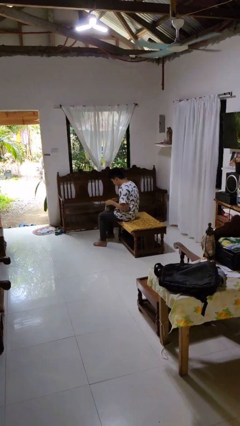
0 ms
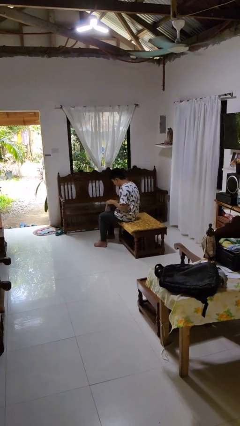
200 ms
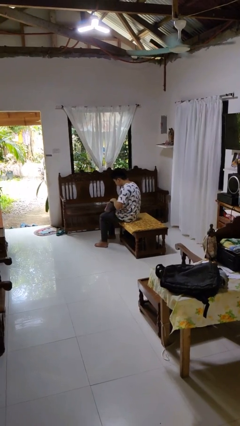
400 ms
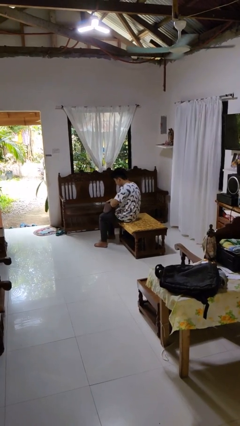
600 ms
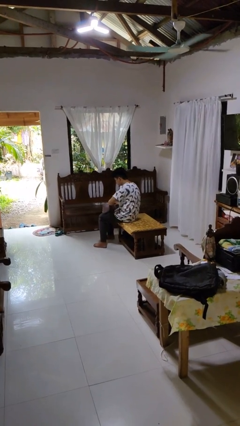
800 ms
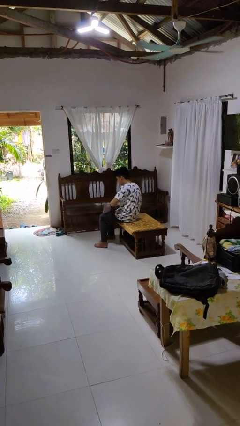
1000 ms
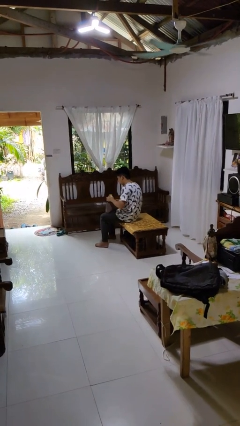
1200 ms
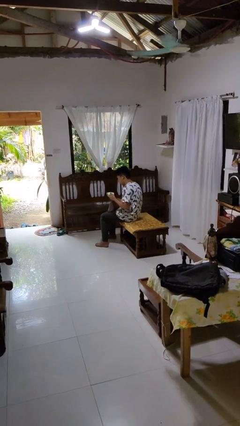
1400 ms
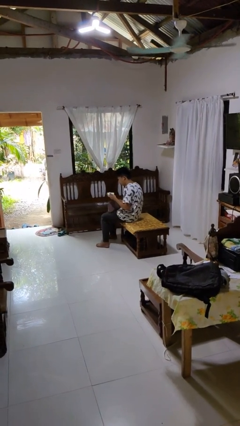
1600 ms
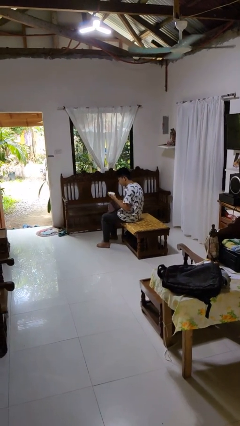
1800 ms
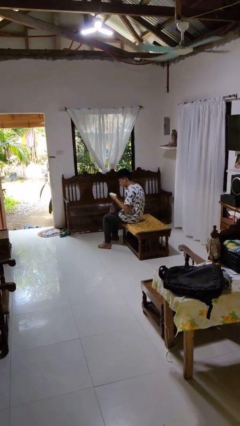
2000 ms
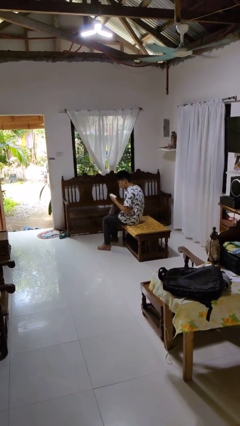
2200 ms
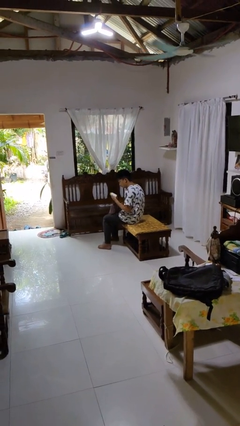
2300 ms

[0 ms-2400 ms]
person takes object from purse

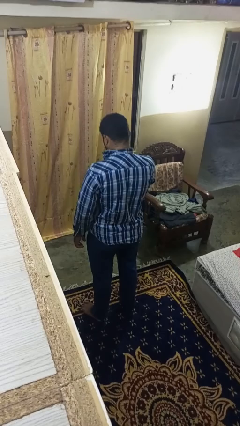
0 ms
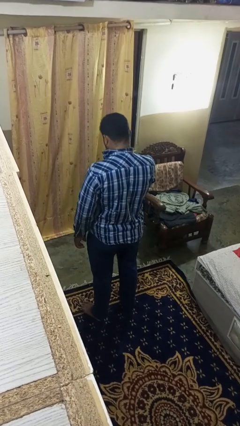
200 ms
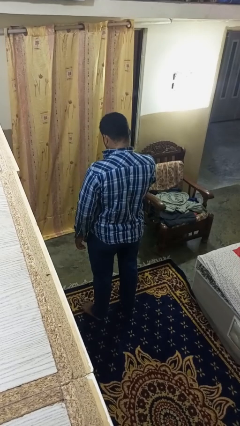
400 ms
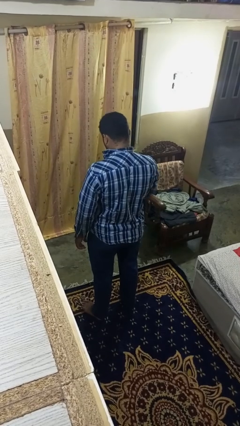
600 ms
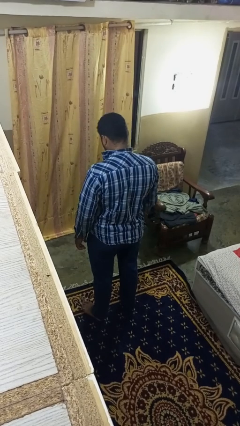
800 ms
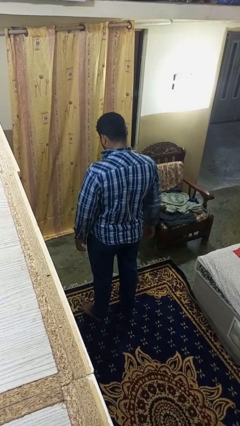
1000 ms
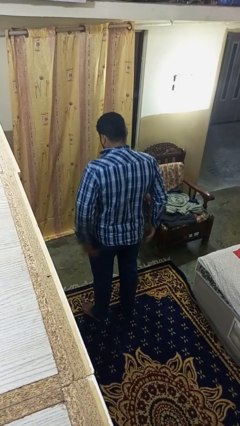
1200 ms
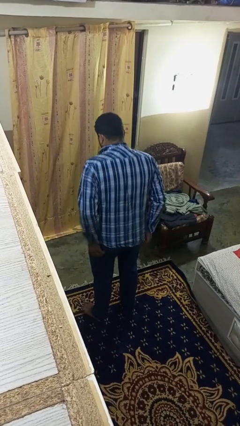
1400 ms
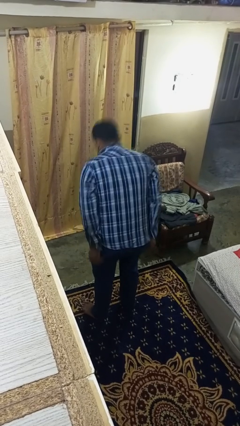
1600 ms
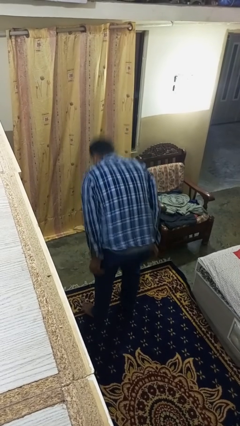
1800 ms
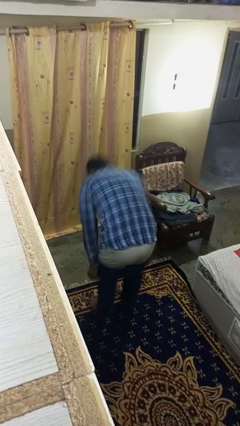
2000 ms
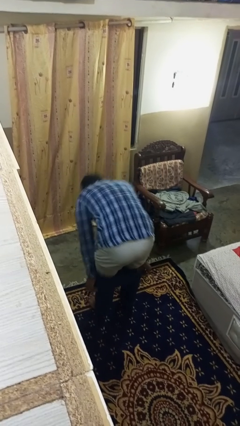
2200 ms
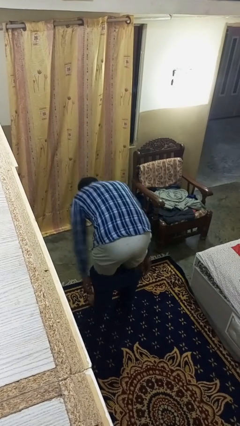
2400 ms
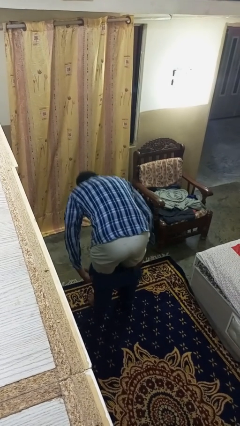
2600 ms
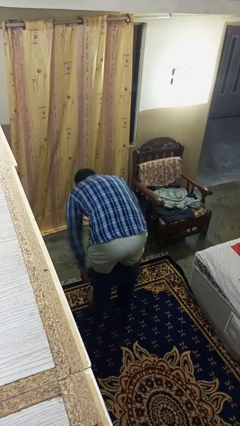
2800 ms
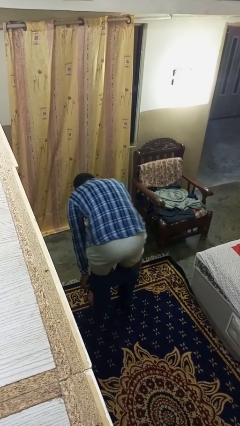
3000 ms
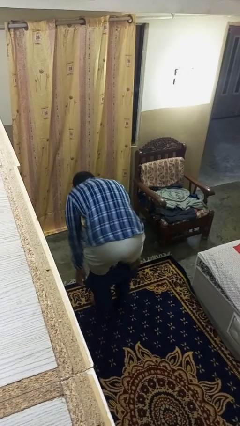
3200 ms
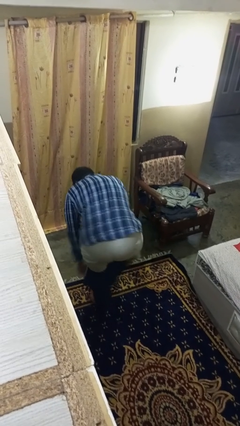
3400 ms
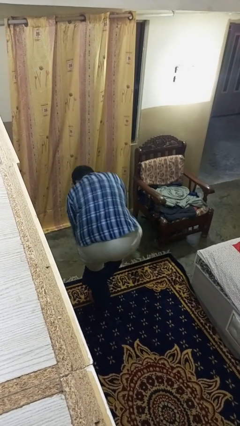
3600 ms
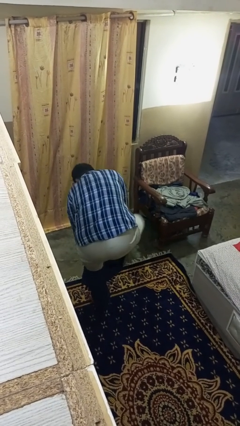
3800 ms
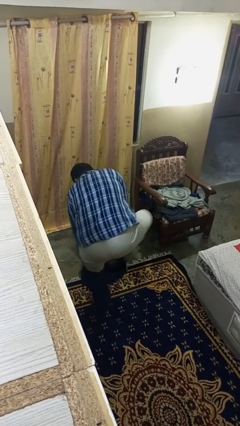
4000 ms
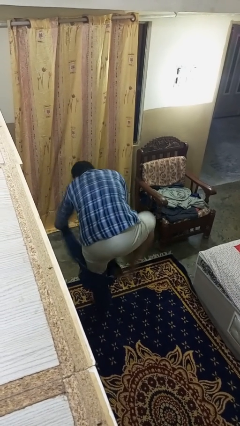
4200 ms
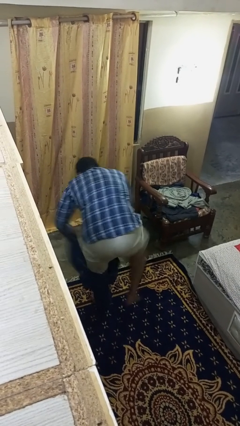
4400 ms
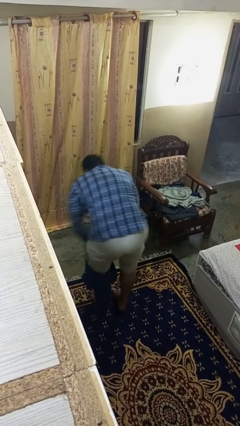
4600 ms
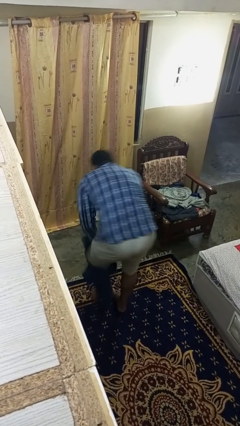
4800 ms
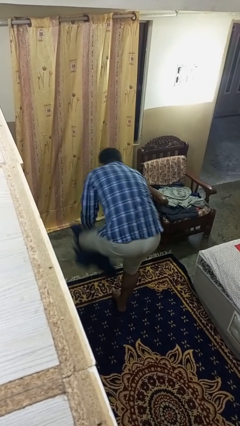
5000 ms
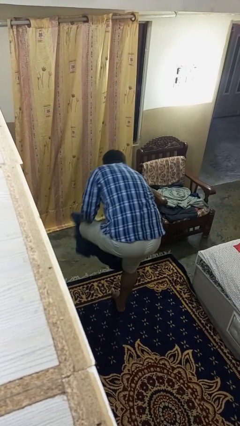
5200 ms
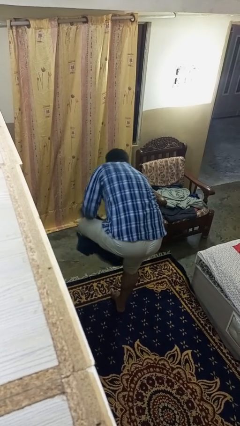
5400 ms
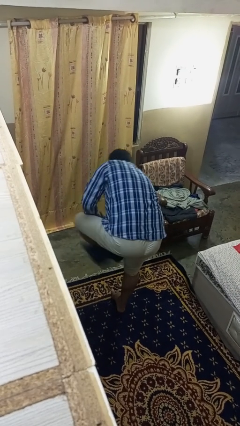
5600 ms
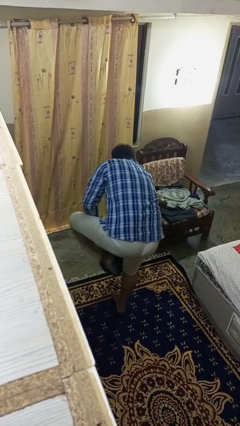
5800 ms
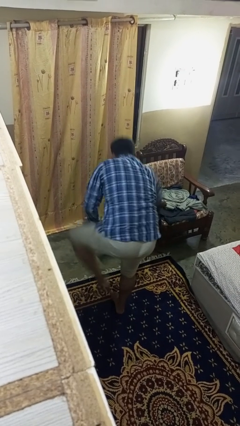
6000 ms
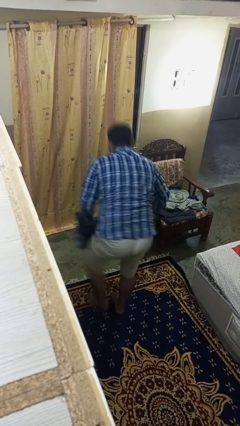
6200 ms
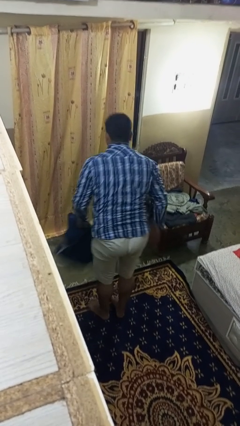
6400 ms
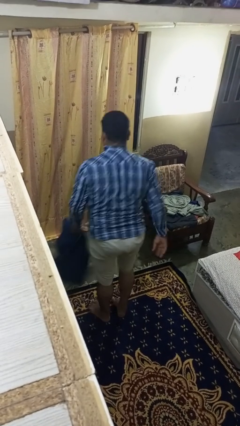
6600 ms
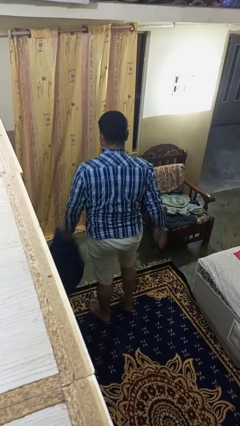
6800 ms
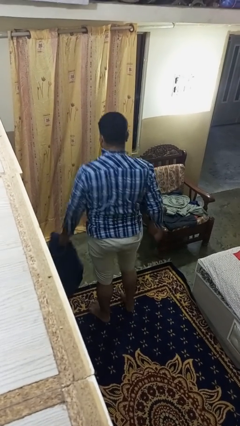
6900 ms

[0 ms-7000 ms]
person takes off pants

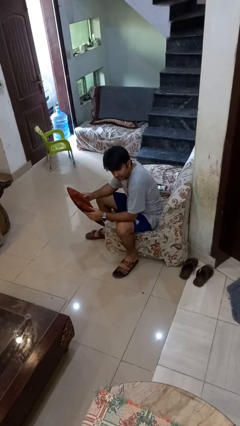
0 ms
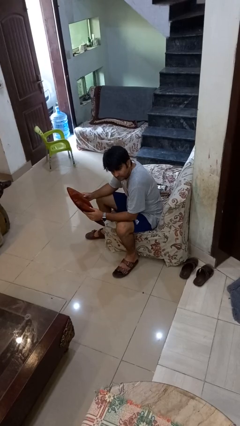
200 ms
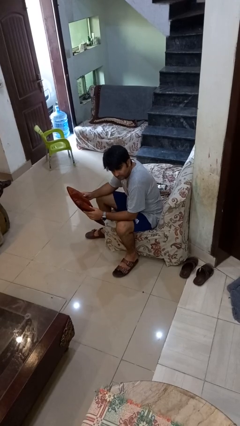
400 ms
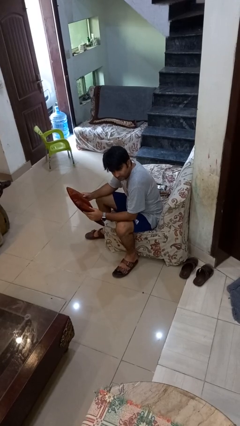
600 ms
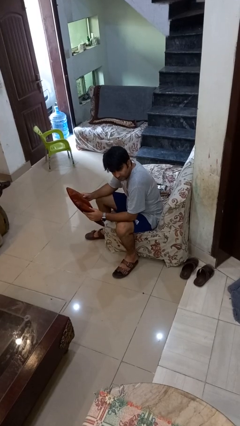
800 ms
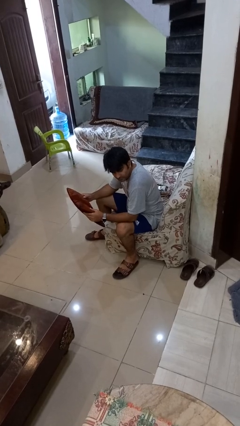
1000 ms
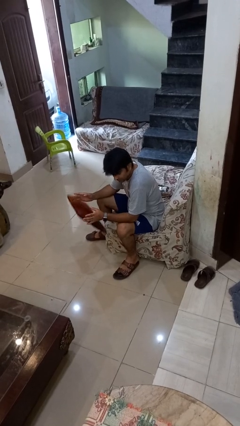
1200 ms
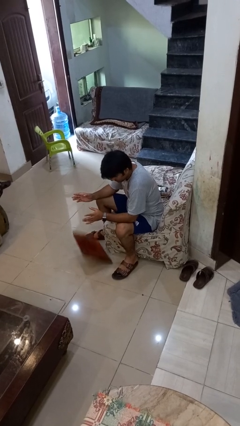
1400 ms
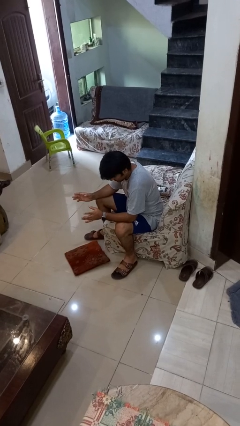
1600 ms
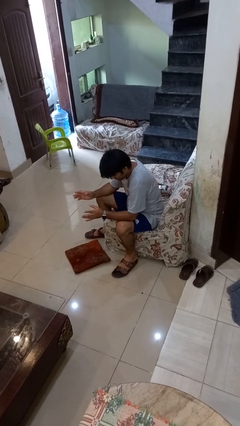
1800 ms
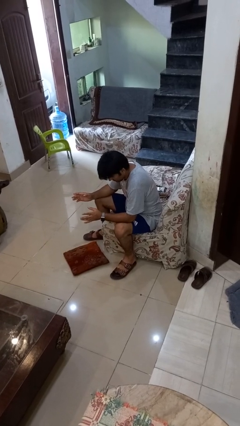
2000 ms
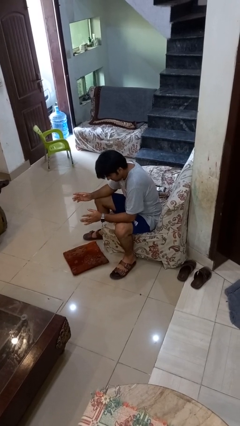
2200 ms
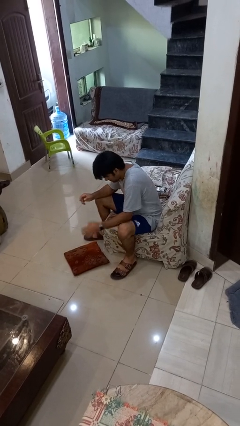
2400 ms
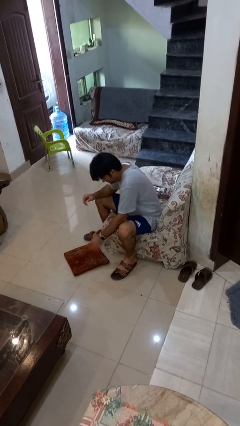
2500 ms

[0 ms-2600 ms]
person drops object

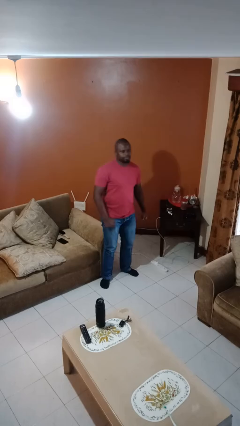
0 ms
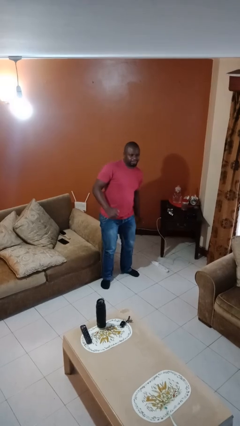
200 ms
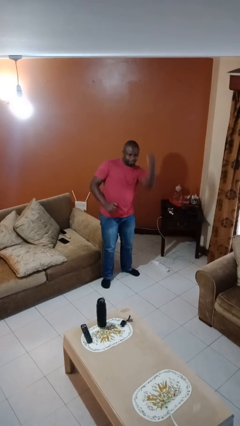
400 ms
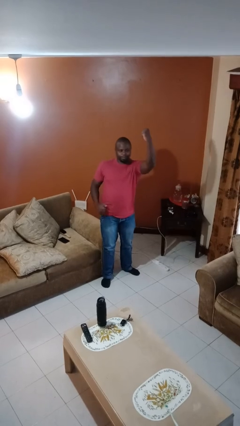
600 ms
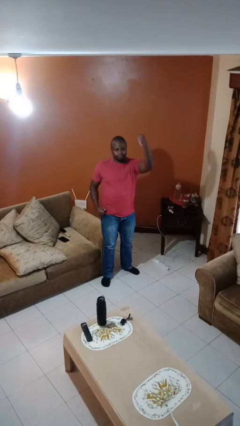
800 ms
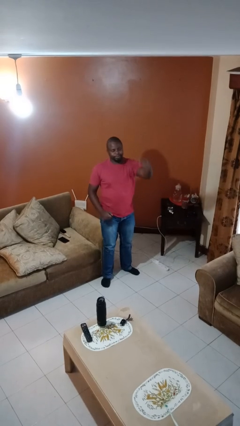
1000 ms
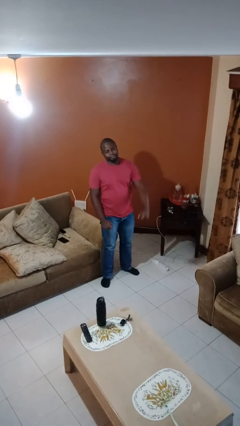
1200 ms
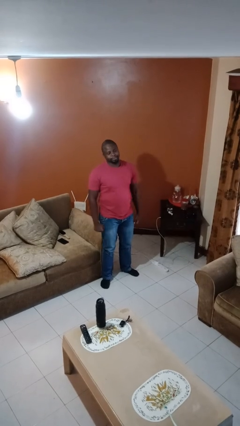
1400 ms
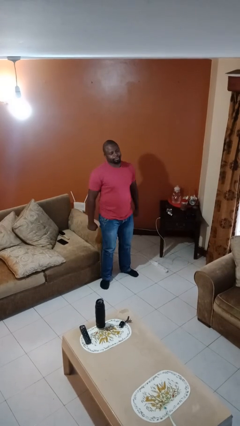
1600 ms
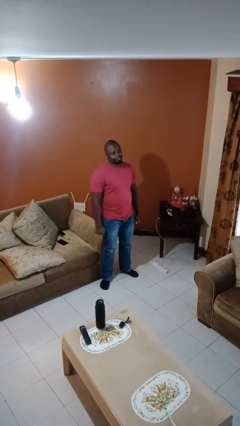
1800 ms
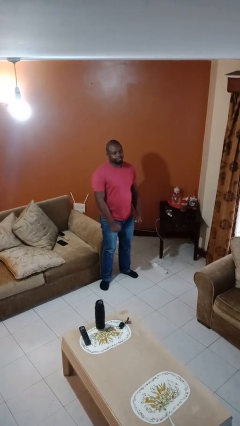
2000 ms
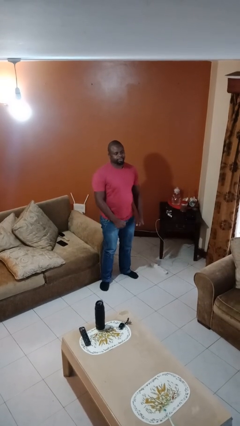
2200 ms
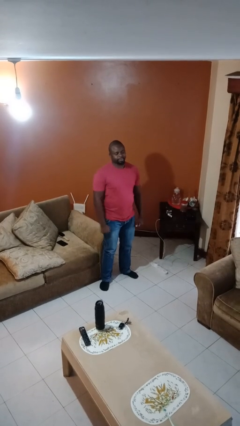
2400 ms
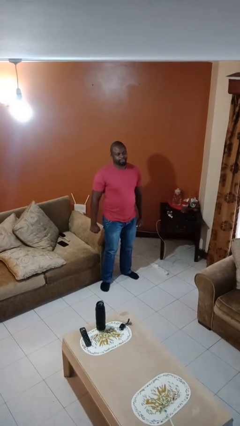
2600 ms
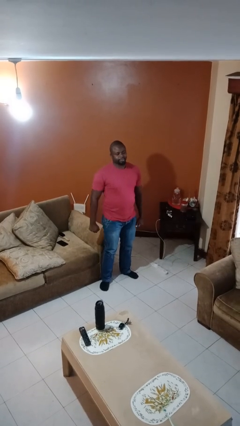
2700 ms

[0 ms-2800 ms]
person punches

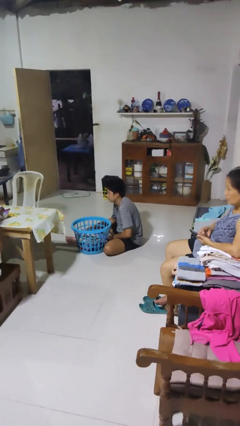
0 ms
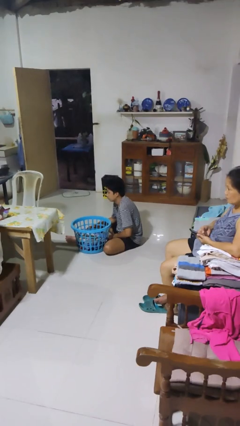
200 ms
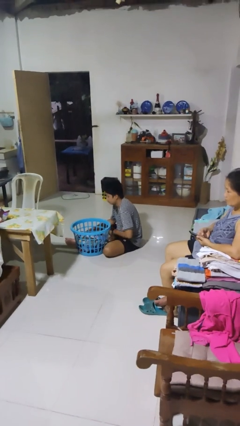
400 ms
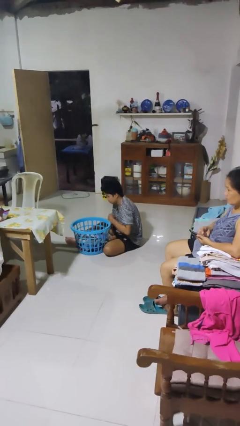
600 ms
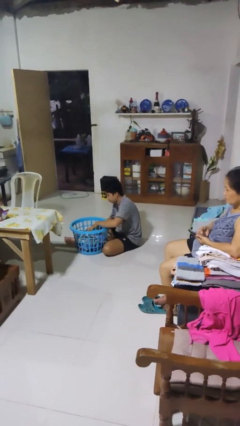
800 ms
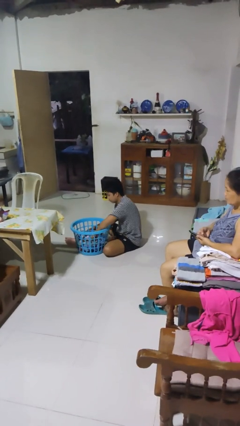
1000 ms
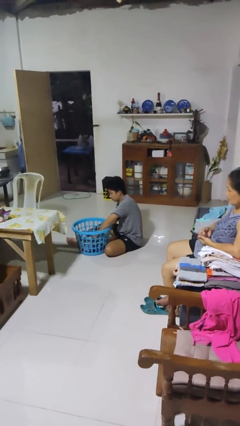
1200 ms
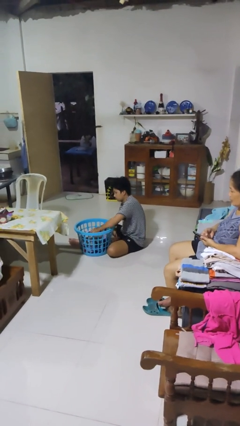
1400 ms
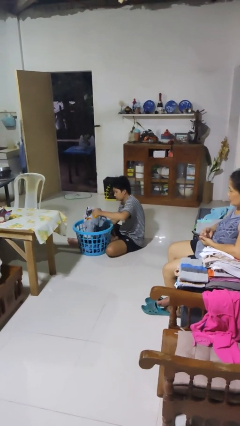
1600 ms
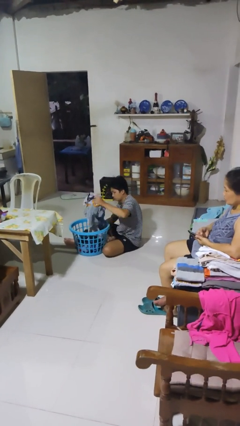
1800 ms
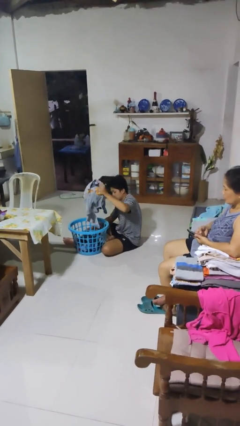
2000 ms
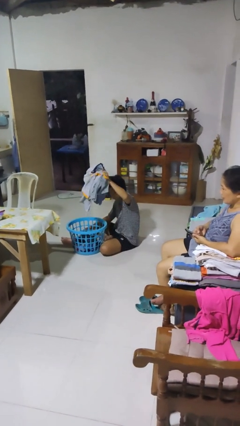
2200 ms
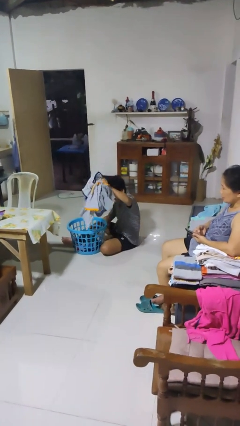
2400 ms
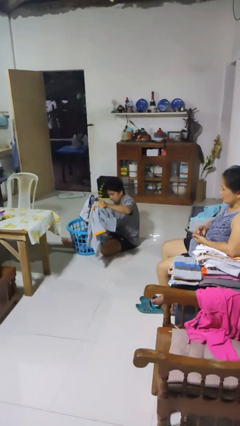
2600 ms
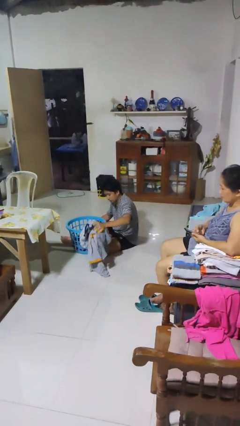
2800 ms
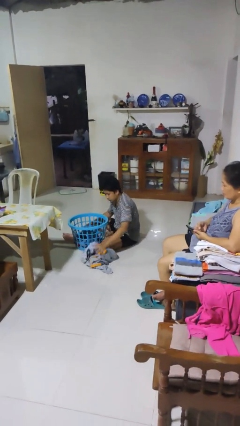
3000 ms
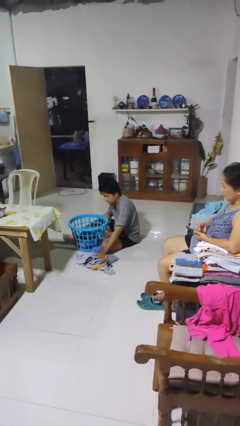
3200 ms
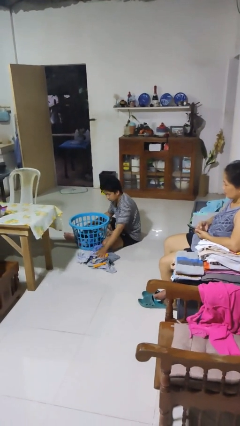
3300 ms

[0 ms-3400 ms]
person unloads clotheswasher
